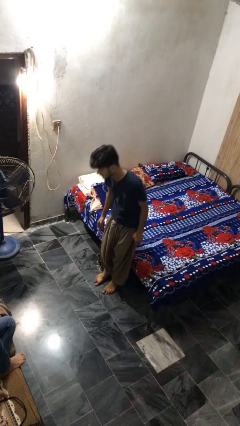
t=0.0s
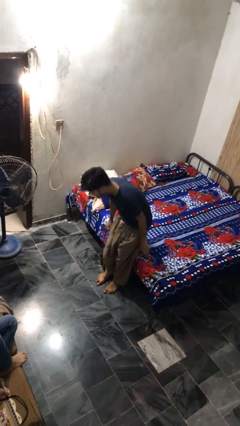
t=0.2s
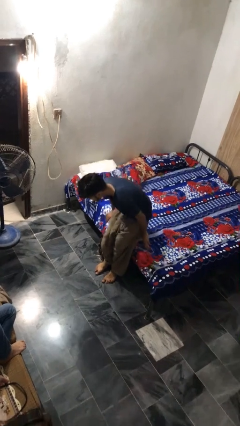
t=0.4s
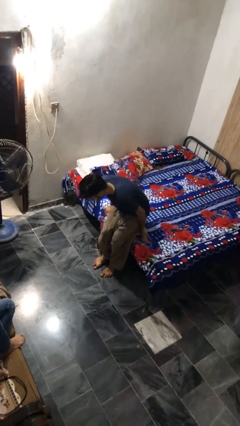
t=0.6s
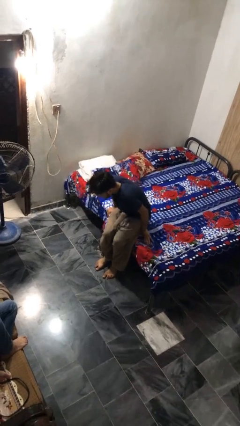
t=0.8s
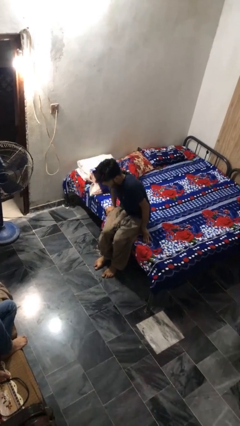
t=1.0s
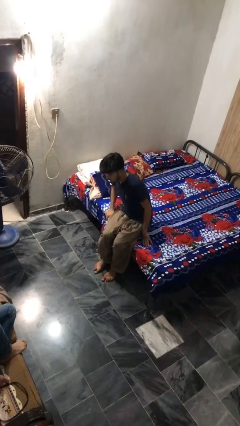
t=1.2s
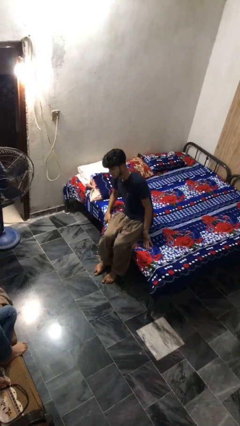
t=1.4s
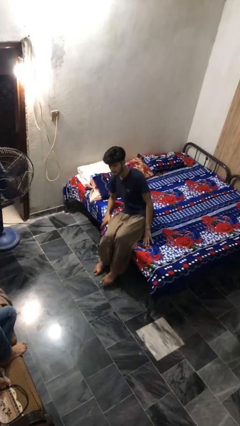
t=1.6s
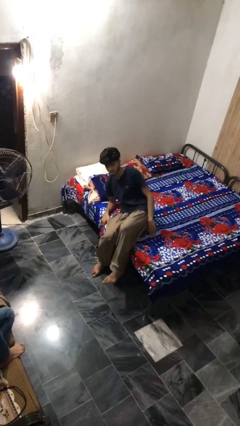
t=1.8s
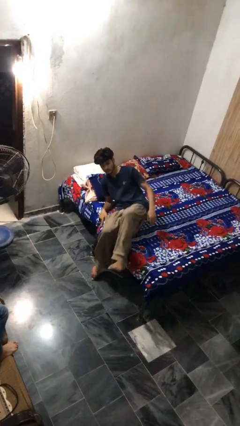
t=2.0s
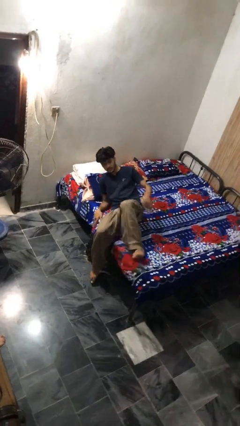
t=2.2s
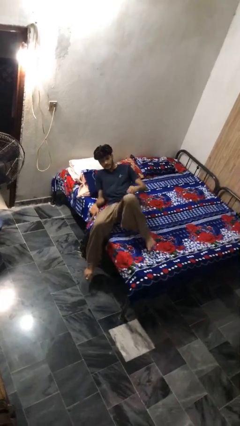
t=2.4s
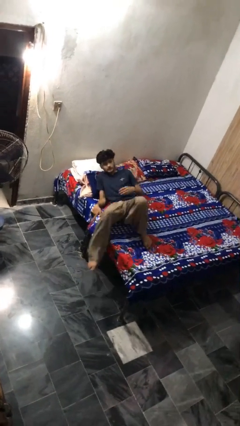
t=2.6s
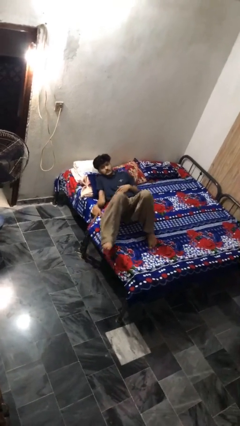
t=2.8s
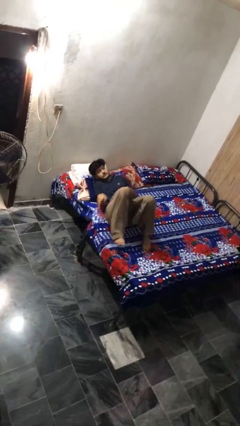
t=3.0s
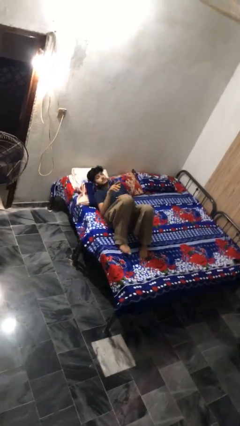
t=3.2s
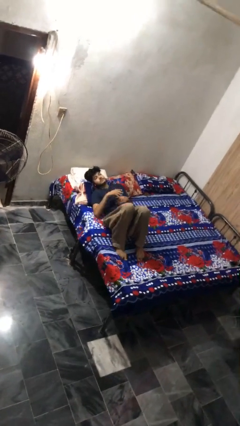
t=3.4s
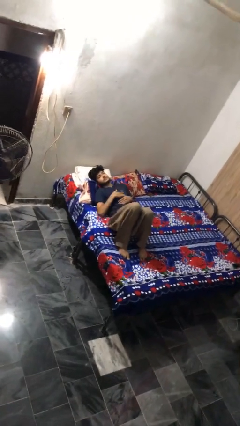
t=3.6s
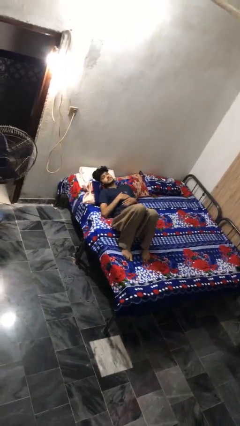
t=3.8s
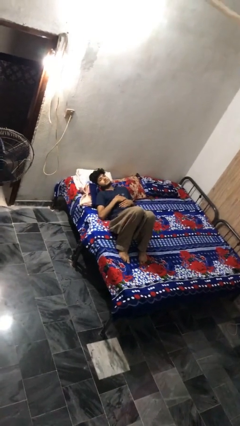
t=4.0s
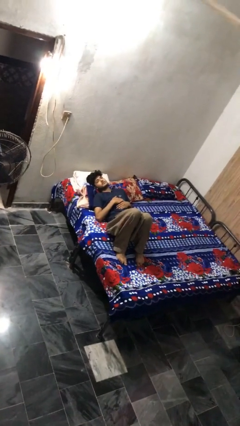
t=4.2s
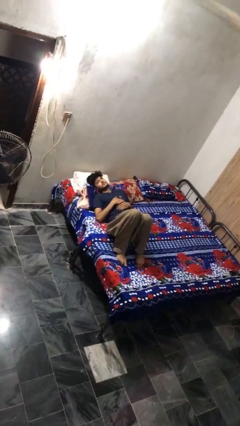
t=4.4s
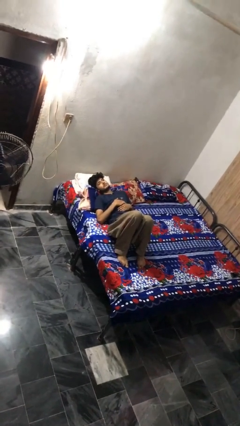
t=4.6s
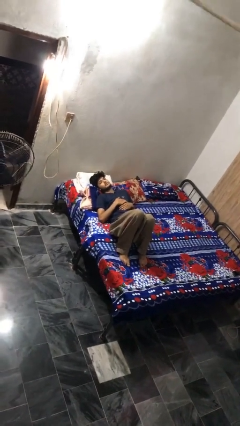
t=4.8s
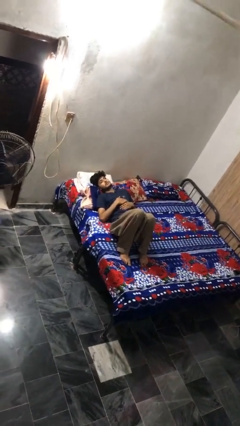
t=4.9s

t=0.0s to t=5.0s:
person lies down on bed

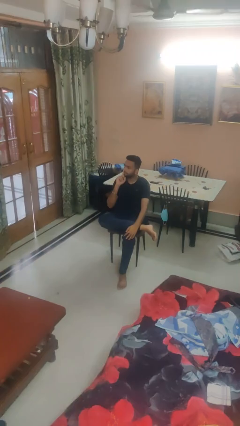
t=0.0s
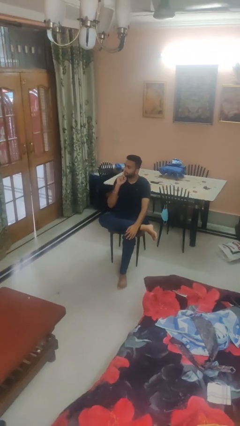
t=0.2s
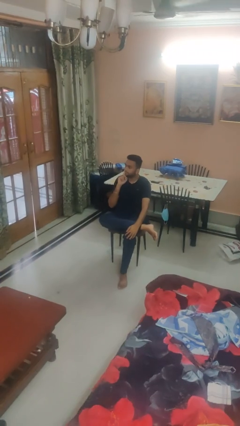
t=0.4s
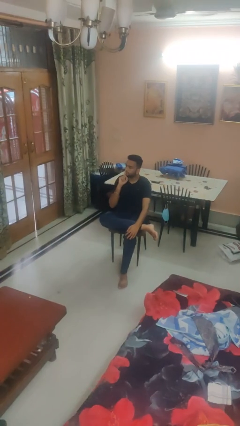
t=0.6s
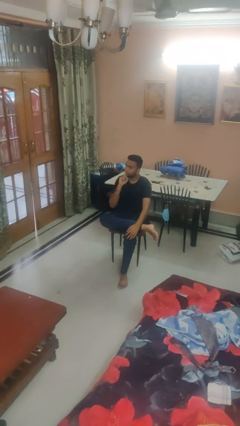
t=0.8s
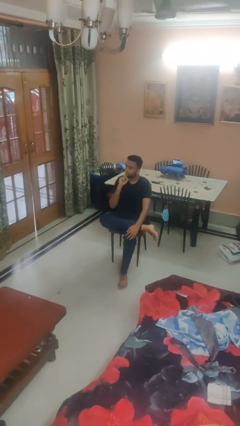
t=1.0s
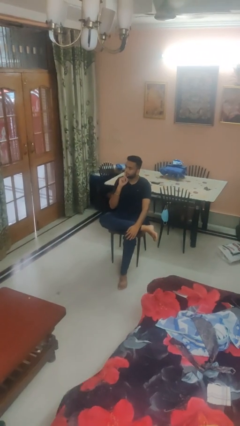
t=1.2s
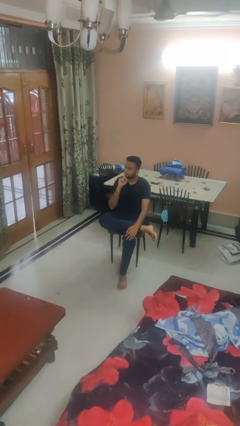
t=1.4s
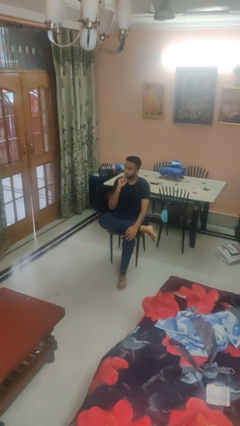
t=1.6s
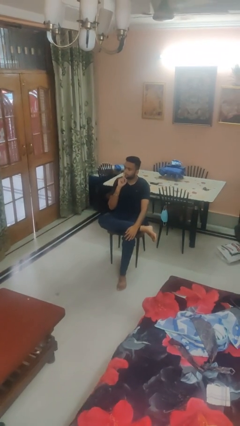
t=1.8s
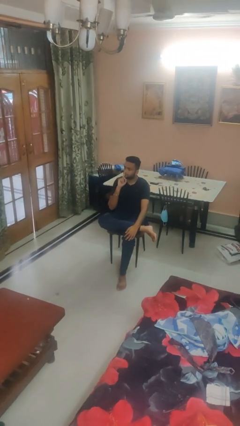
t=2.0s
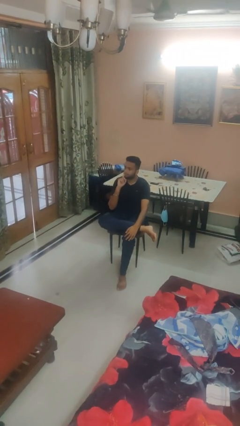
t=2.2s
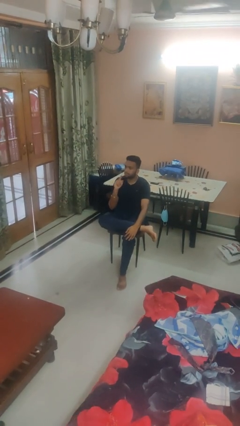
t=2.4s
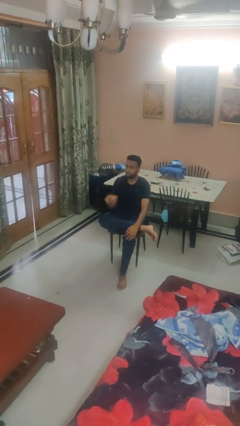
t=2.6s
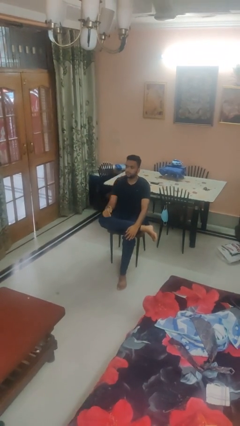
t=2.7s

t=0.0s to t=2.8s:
person gestures be quiet

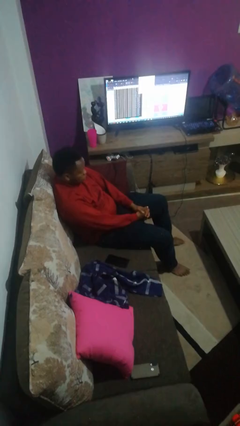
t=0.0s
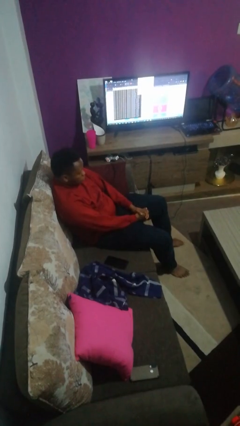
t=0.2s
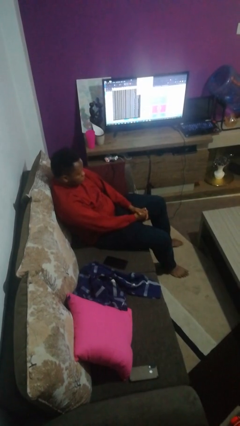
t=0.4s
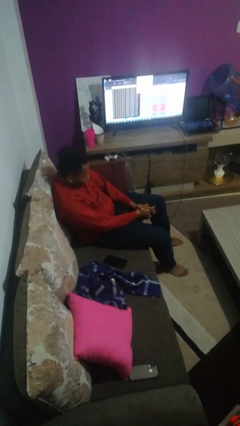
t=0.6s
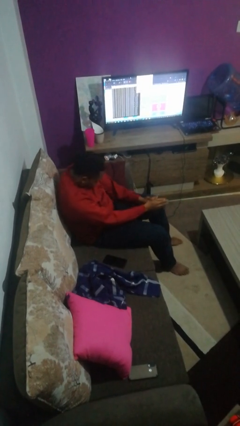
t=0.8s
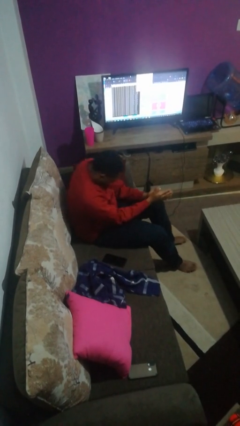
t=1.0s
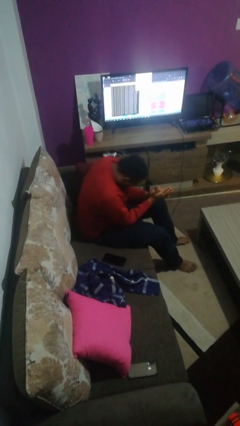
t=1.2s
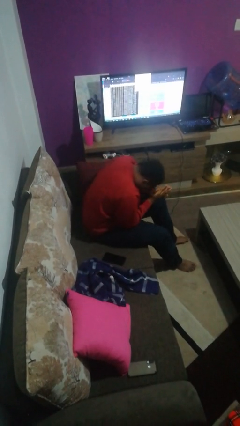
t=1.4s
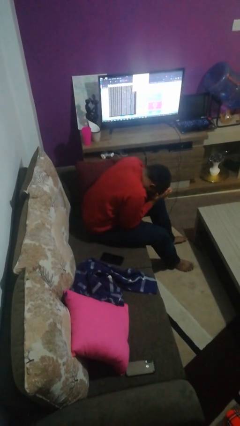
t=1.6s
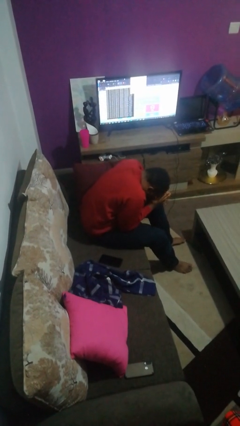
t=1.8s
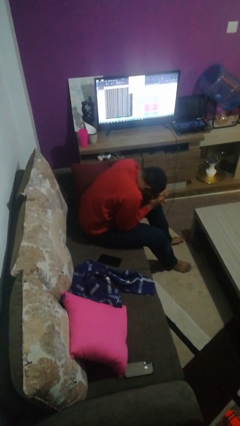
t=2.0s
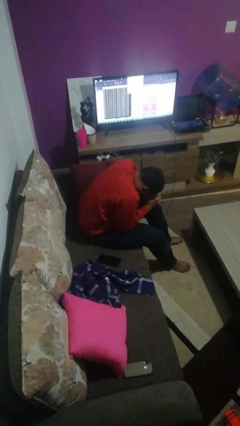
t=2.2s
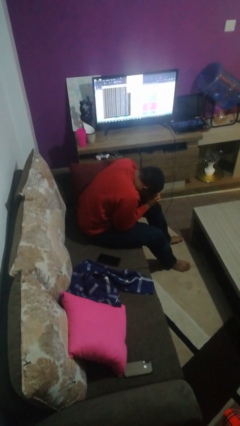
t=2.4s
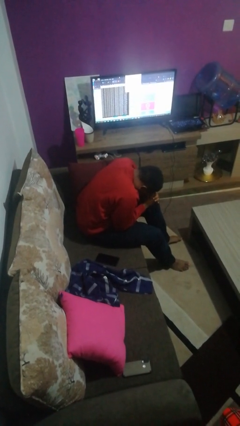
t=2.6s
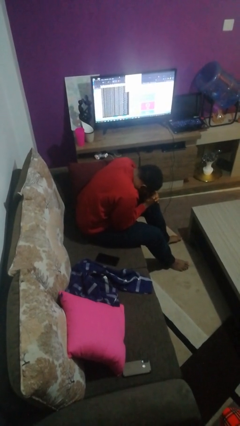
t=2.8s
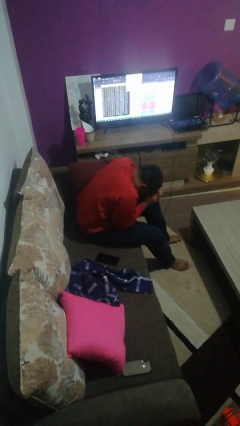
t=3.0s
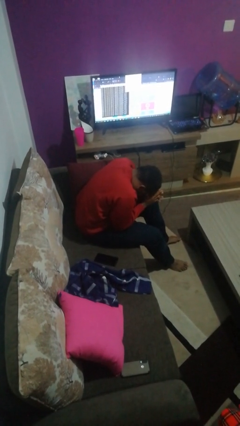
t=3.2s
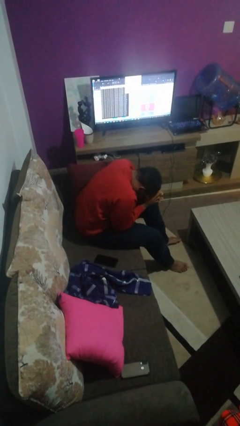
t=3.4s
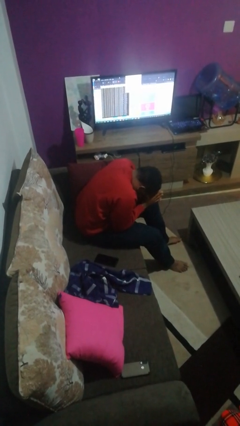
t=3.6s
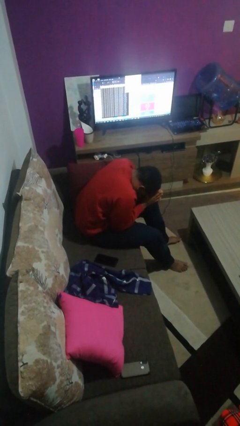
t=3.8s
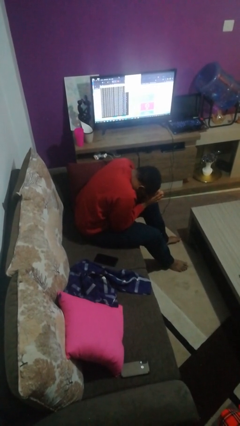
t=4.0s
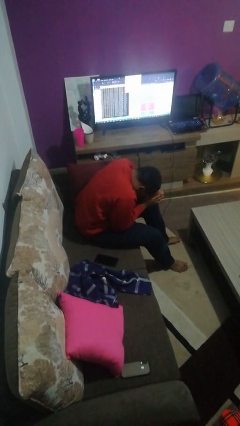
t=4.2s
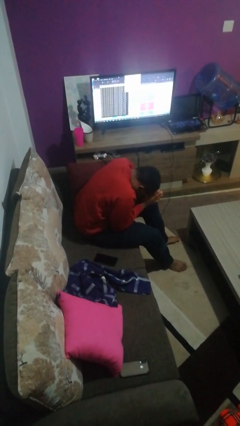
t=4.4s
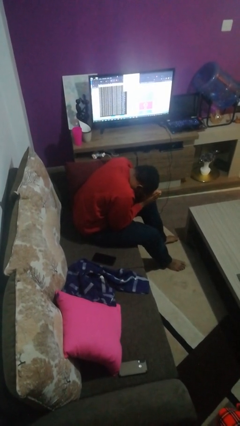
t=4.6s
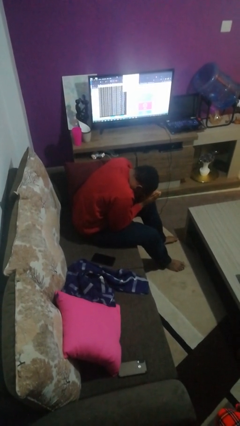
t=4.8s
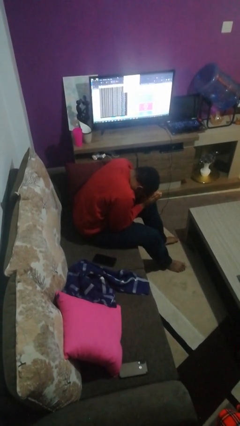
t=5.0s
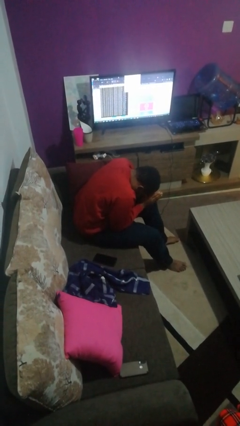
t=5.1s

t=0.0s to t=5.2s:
person prays

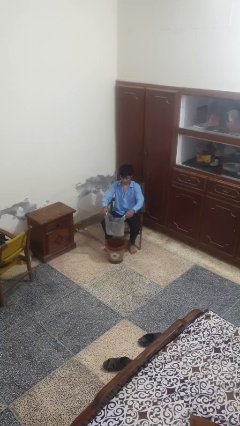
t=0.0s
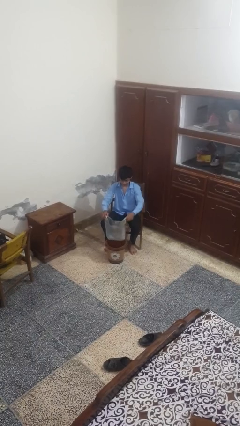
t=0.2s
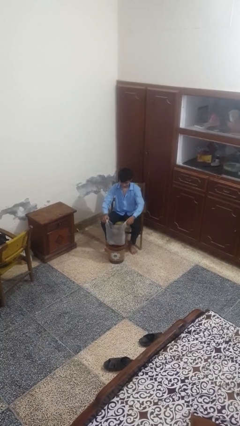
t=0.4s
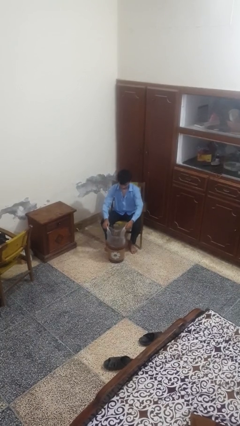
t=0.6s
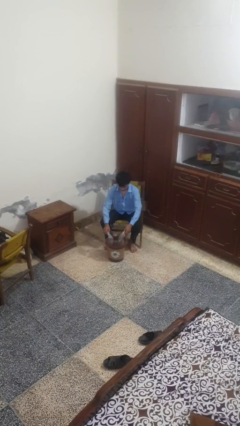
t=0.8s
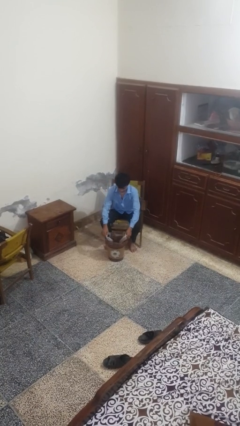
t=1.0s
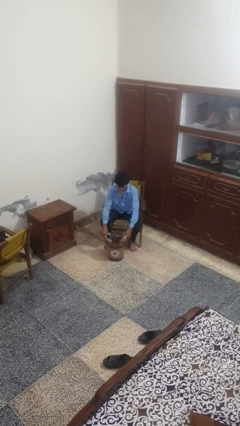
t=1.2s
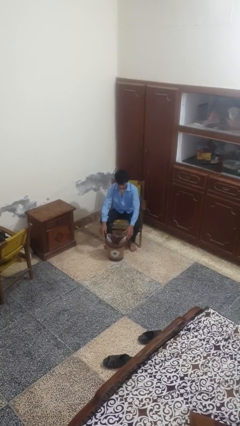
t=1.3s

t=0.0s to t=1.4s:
person inserts trashbag into trashcan

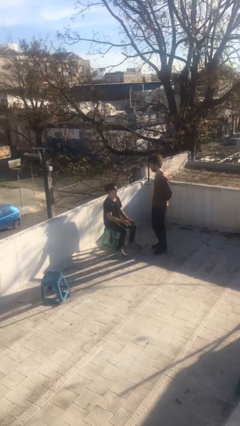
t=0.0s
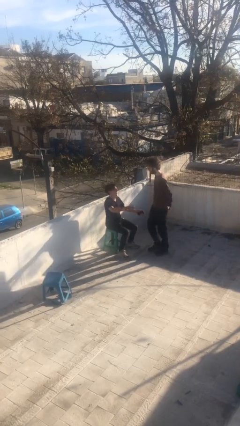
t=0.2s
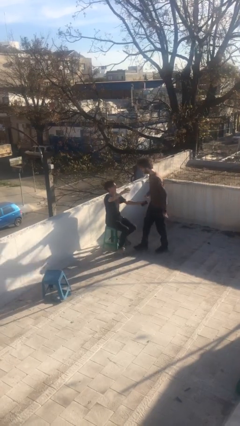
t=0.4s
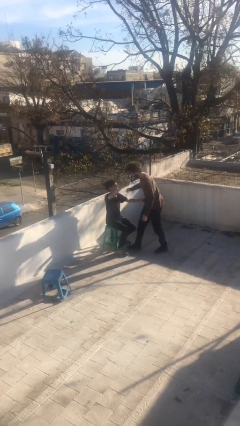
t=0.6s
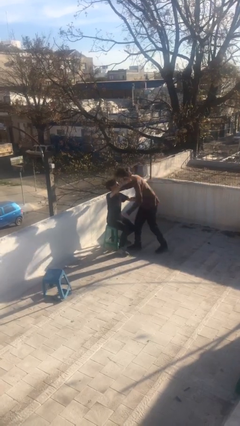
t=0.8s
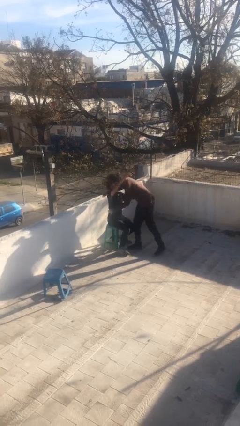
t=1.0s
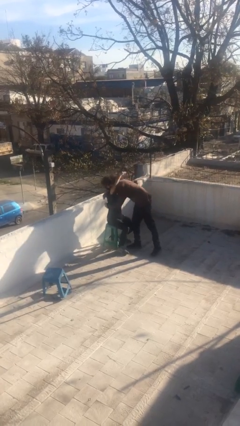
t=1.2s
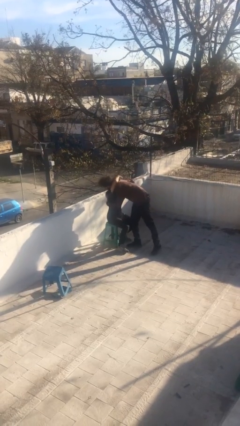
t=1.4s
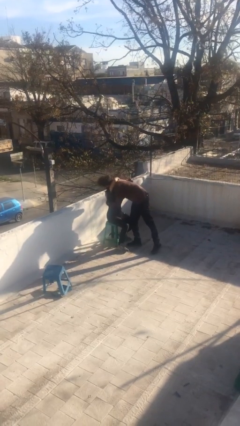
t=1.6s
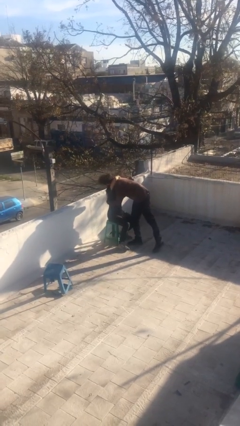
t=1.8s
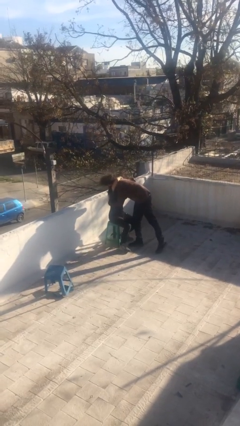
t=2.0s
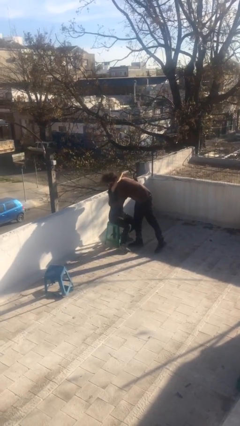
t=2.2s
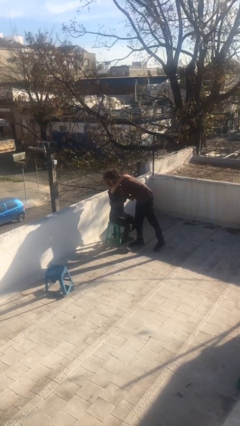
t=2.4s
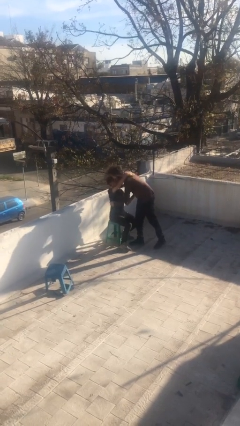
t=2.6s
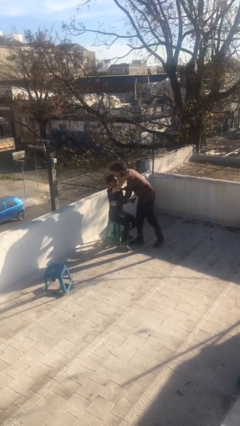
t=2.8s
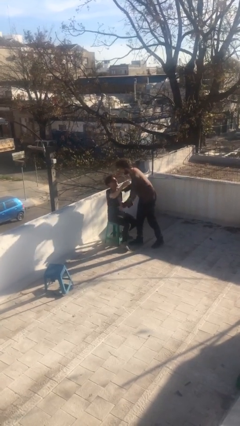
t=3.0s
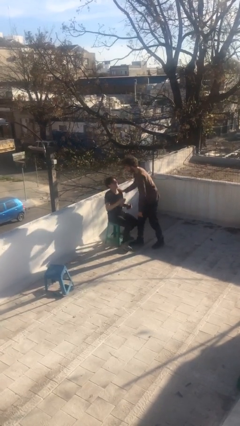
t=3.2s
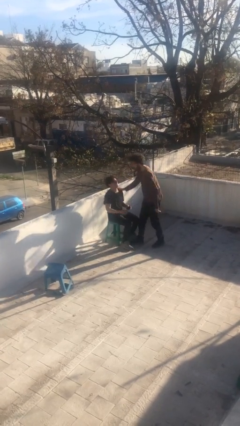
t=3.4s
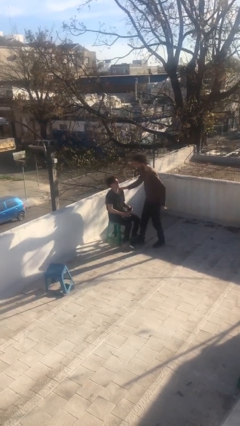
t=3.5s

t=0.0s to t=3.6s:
person embraces person
